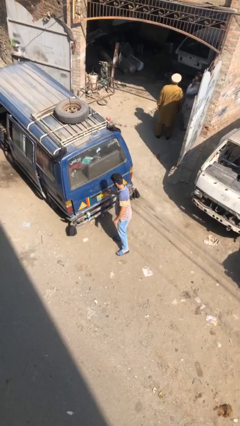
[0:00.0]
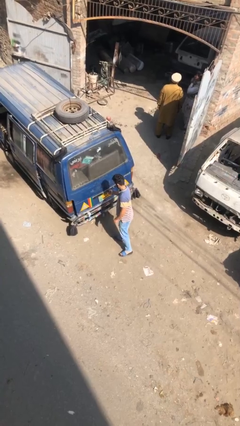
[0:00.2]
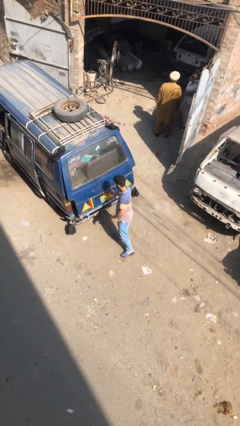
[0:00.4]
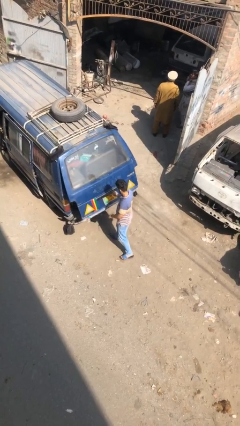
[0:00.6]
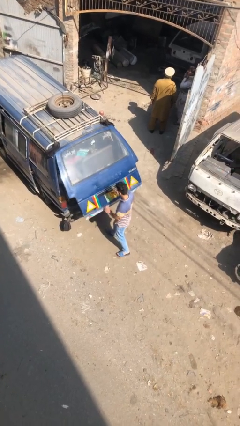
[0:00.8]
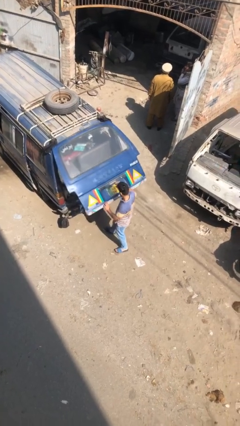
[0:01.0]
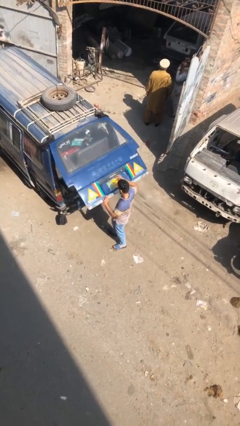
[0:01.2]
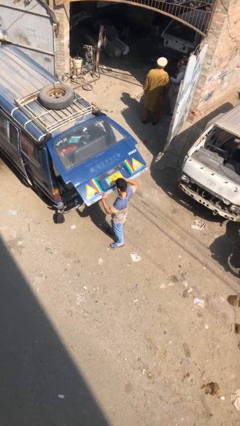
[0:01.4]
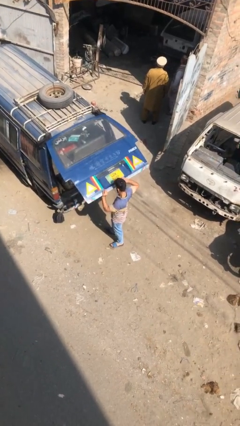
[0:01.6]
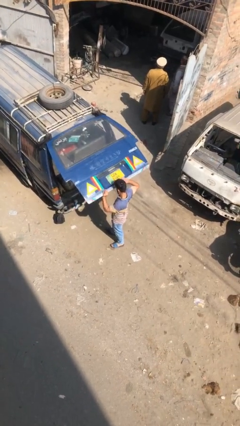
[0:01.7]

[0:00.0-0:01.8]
person opens car trunk

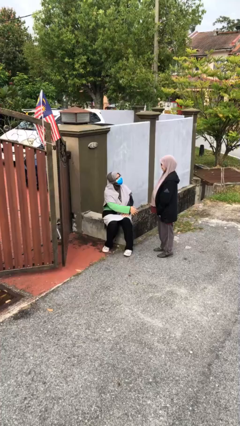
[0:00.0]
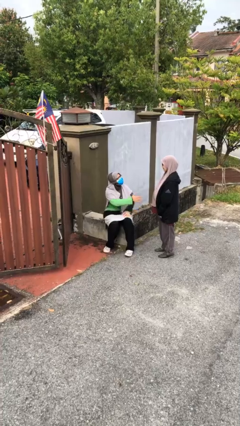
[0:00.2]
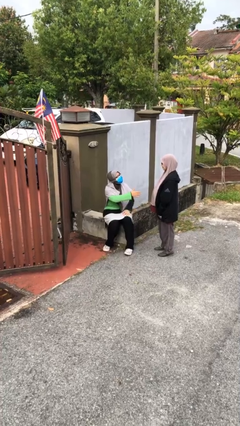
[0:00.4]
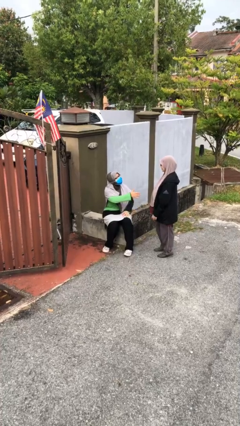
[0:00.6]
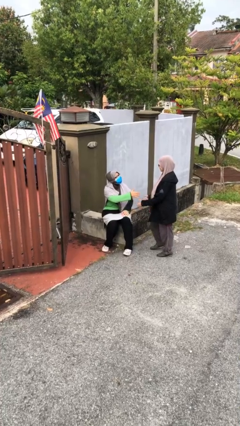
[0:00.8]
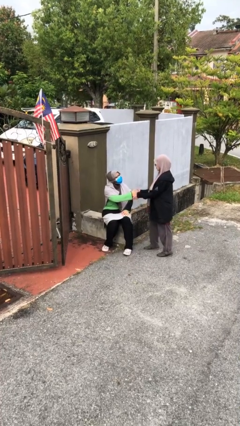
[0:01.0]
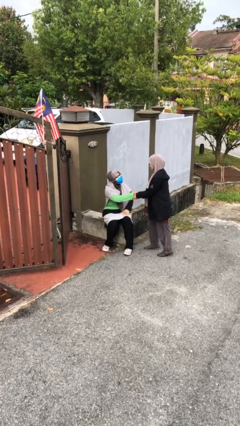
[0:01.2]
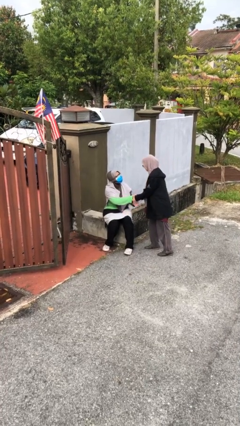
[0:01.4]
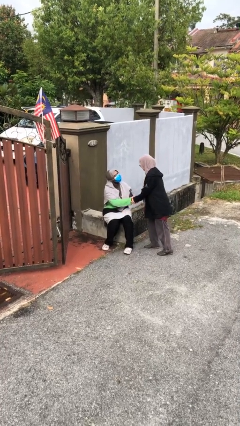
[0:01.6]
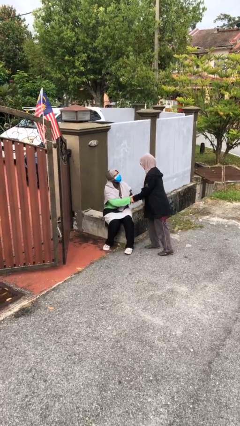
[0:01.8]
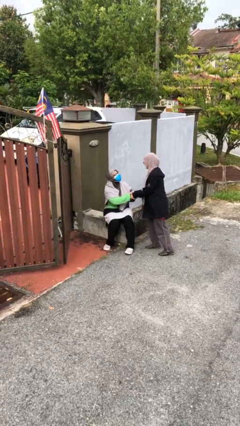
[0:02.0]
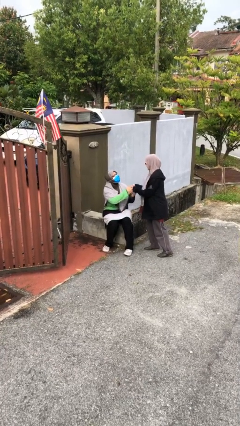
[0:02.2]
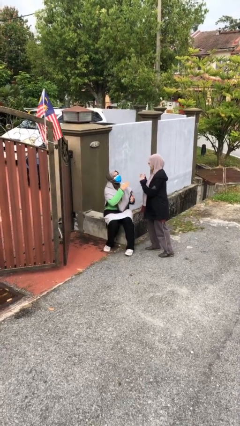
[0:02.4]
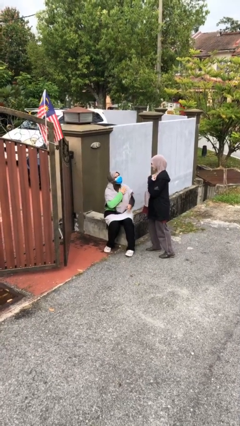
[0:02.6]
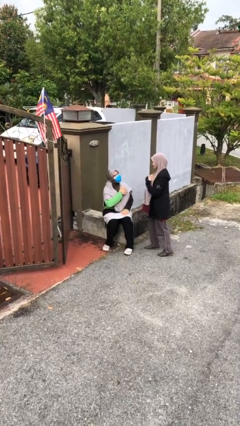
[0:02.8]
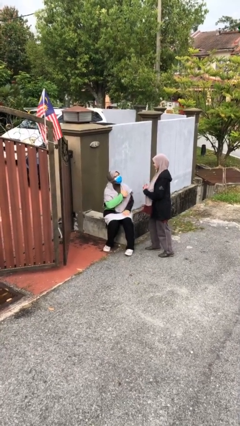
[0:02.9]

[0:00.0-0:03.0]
person shakes hand

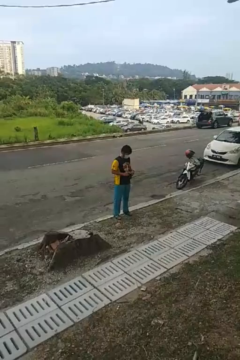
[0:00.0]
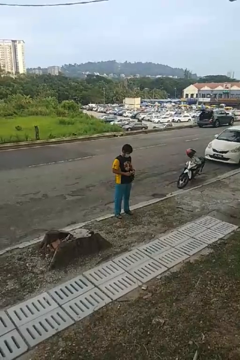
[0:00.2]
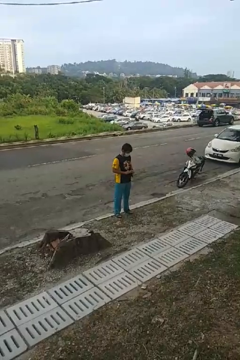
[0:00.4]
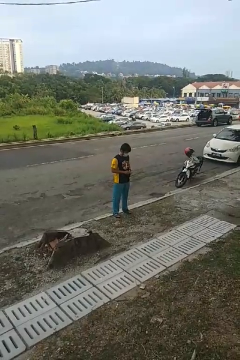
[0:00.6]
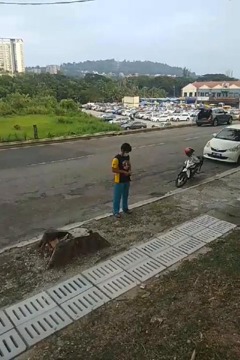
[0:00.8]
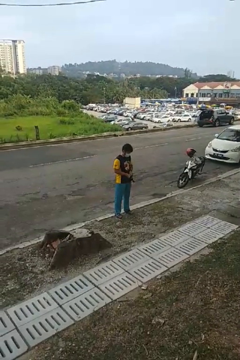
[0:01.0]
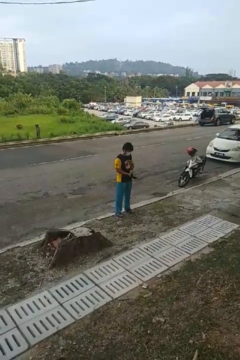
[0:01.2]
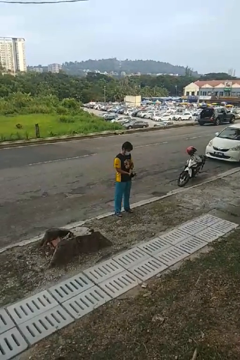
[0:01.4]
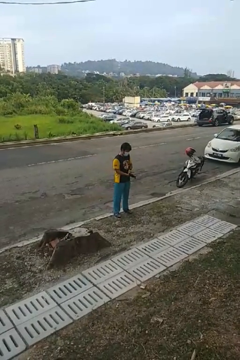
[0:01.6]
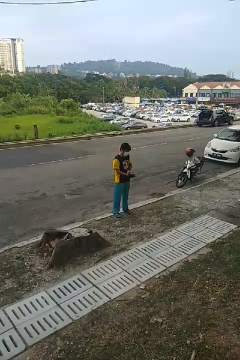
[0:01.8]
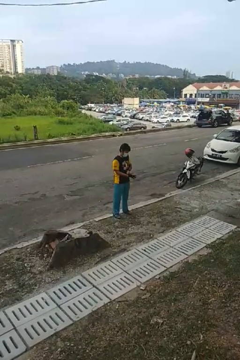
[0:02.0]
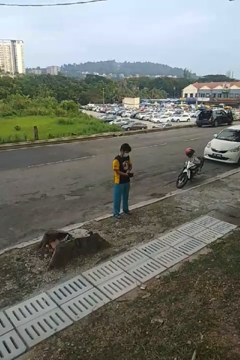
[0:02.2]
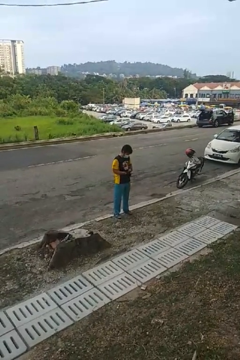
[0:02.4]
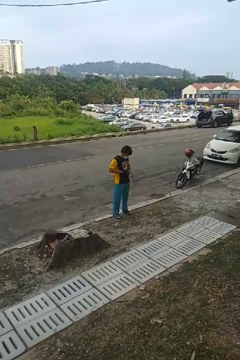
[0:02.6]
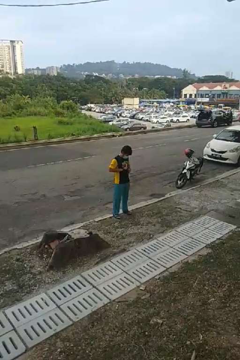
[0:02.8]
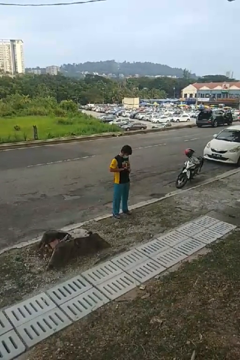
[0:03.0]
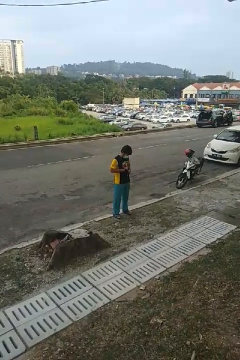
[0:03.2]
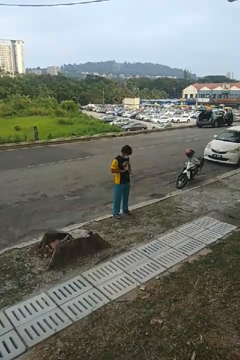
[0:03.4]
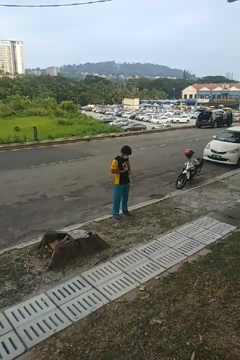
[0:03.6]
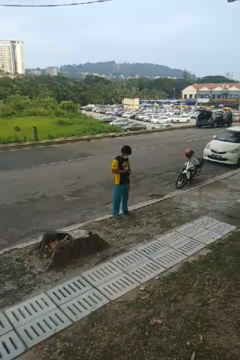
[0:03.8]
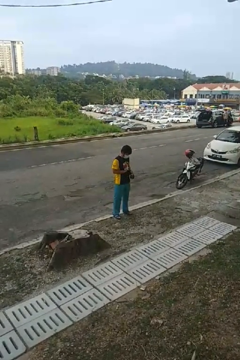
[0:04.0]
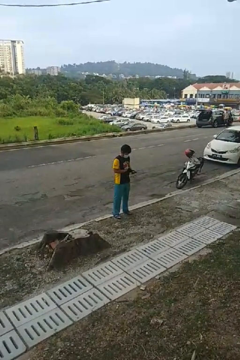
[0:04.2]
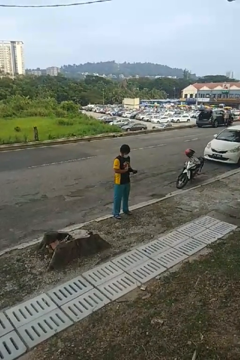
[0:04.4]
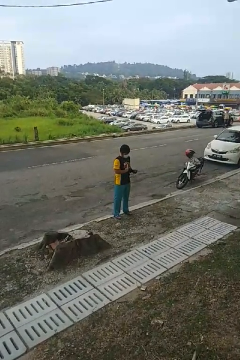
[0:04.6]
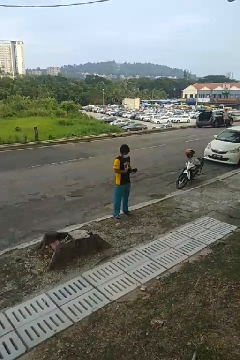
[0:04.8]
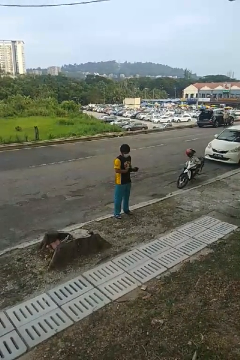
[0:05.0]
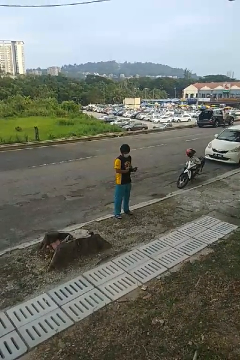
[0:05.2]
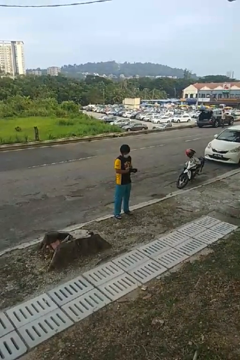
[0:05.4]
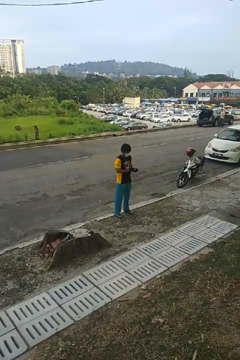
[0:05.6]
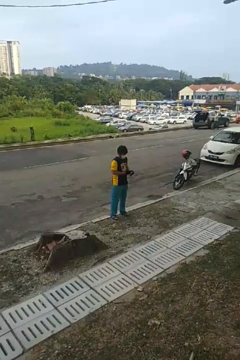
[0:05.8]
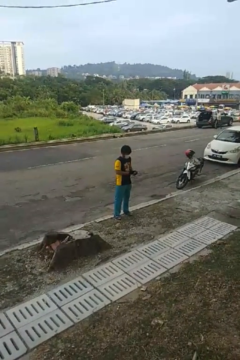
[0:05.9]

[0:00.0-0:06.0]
person puts on gloves

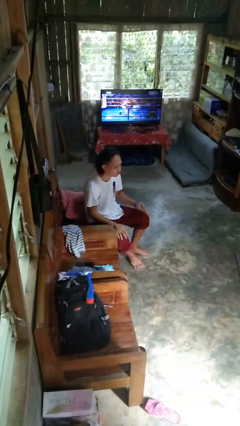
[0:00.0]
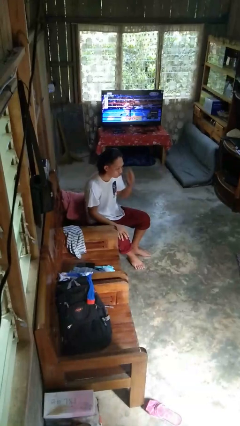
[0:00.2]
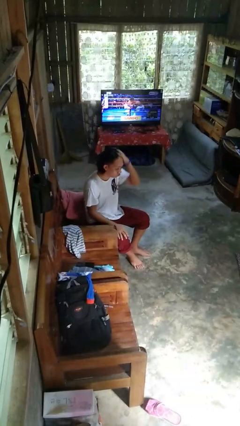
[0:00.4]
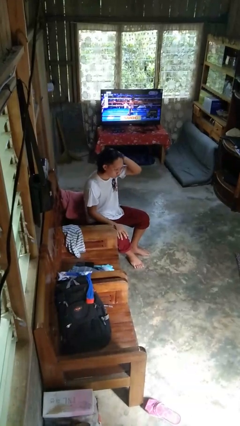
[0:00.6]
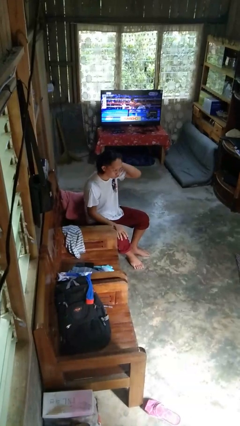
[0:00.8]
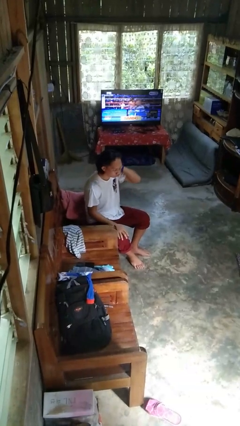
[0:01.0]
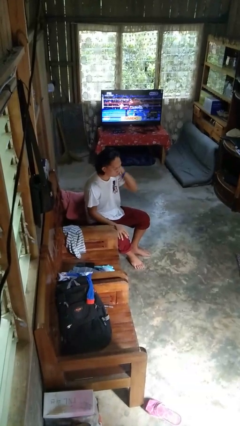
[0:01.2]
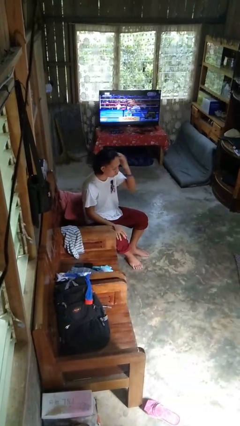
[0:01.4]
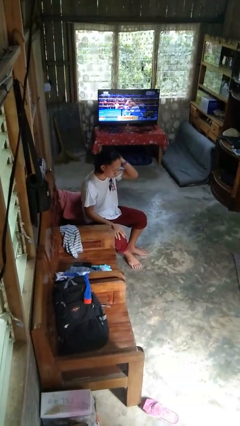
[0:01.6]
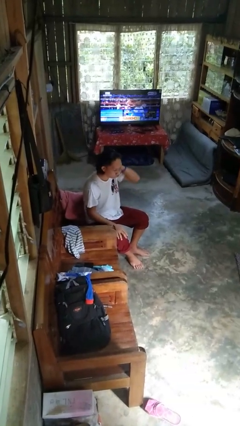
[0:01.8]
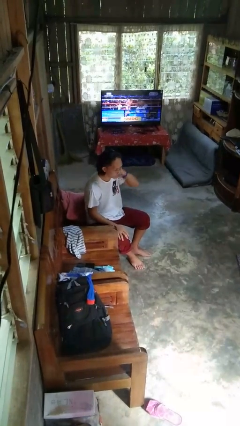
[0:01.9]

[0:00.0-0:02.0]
person strokes hair

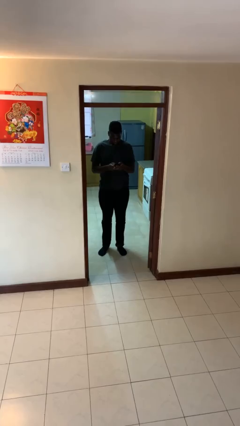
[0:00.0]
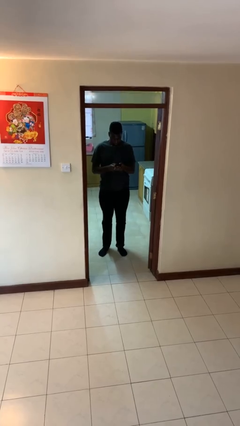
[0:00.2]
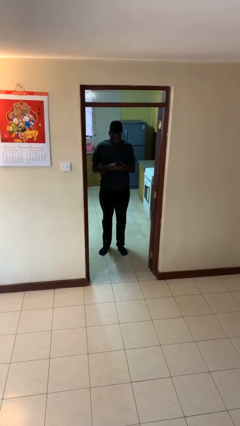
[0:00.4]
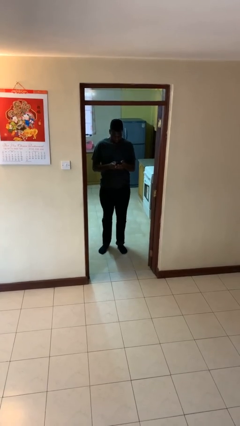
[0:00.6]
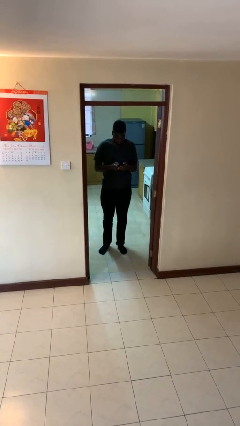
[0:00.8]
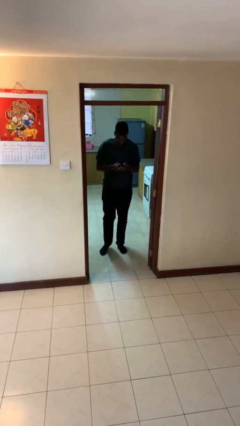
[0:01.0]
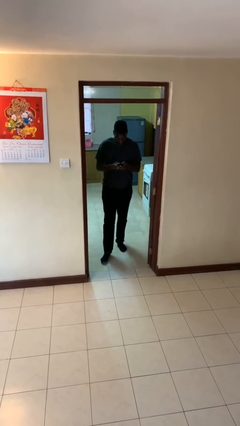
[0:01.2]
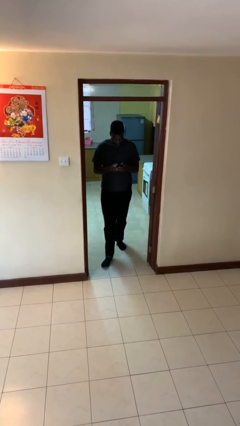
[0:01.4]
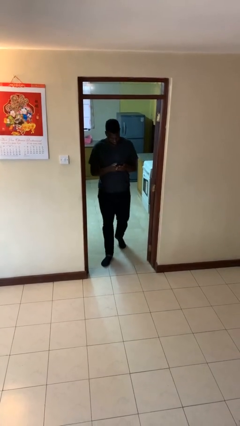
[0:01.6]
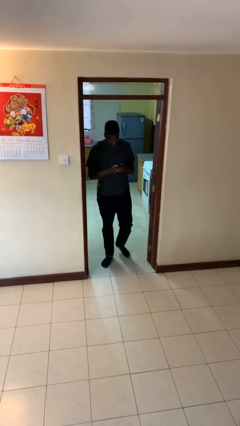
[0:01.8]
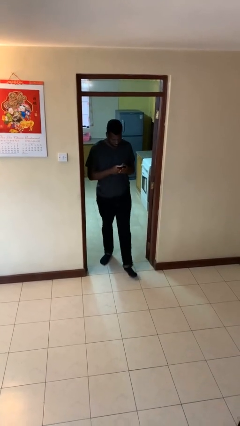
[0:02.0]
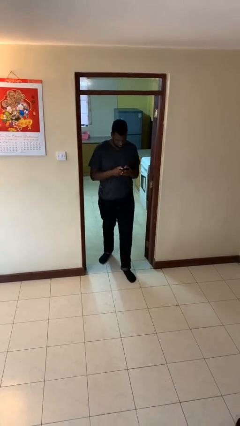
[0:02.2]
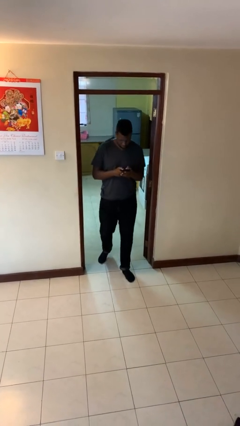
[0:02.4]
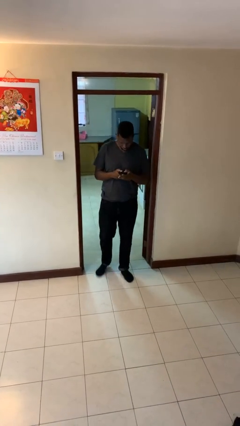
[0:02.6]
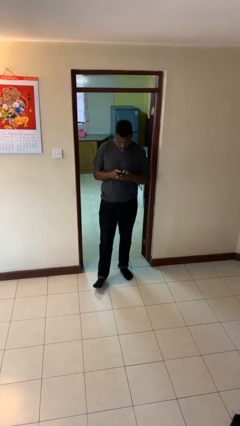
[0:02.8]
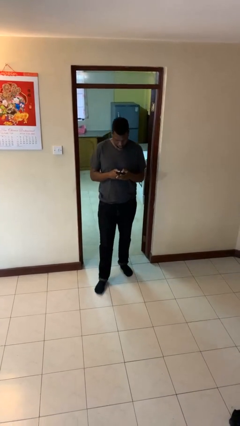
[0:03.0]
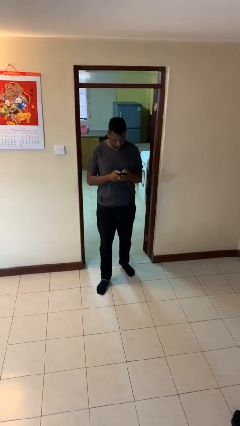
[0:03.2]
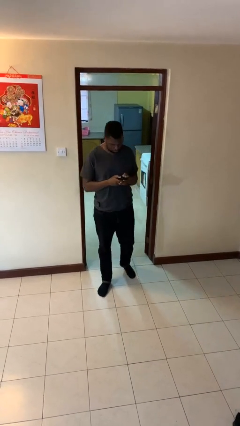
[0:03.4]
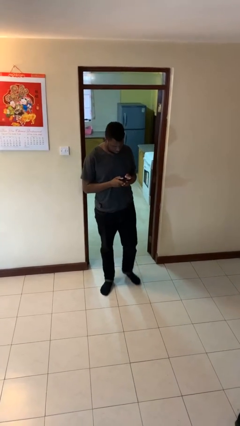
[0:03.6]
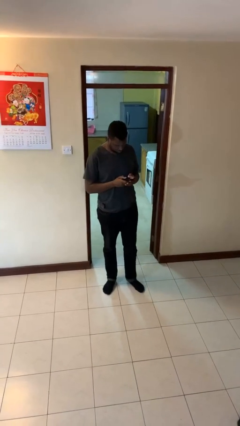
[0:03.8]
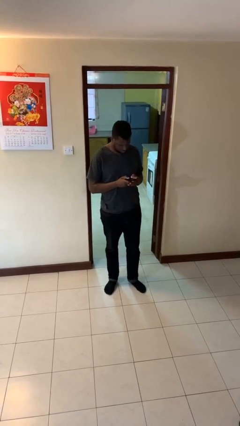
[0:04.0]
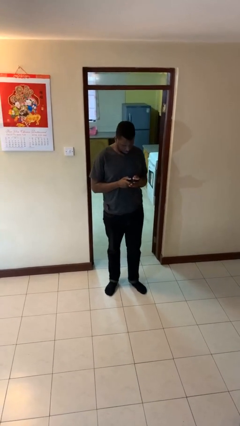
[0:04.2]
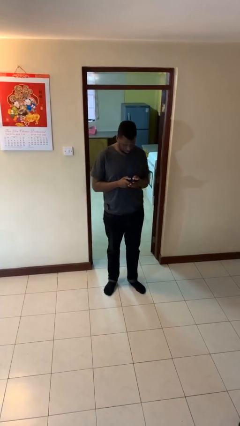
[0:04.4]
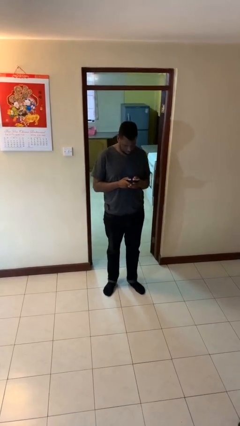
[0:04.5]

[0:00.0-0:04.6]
person enters scene through structure

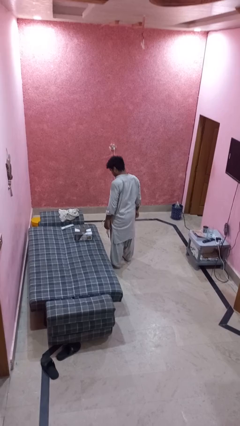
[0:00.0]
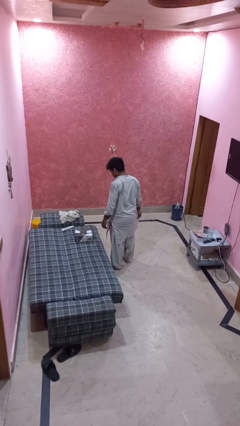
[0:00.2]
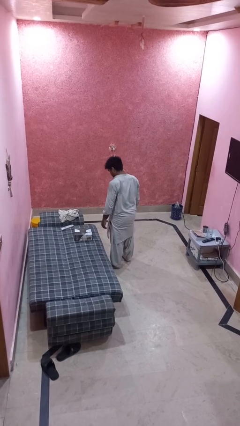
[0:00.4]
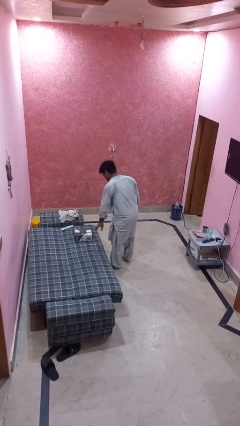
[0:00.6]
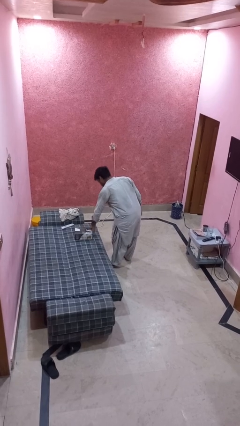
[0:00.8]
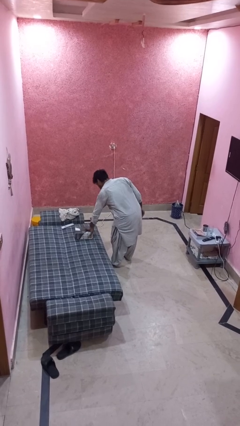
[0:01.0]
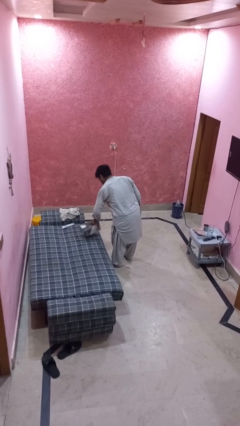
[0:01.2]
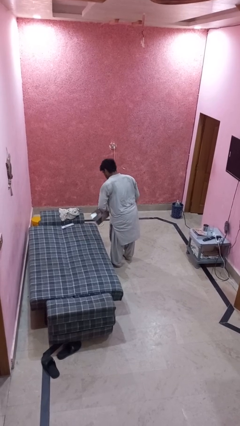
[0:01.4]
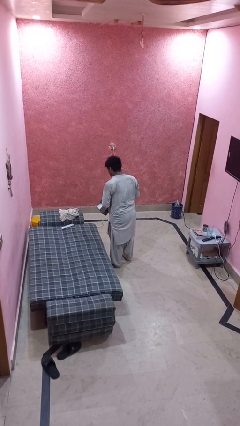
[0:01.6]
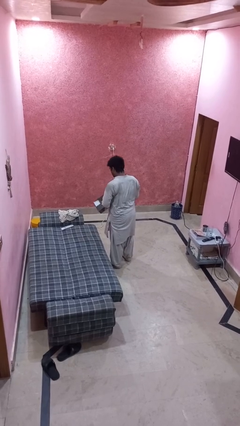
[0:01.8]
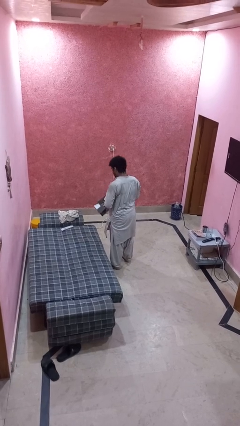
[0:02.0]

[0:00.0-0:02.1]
person picks up object from bed
